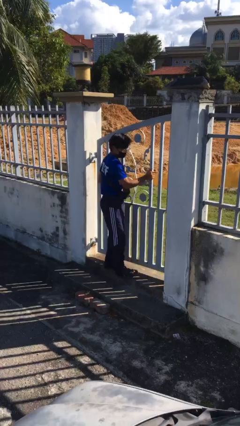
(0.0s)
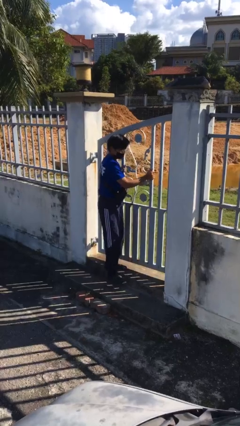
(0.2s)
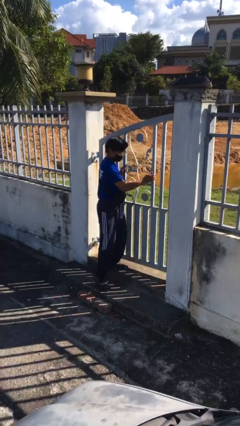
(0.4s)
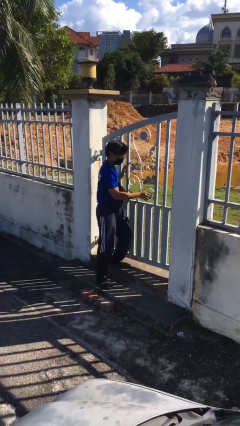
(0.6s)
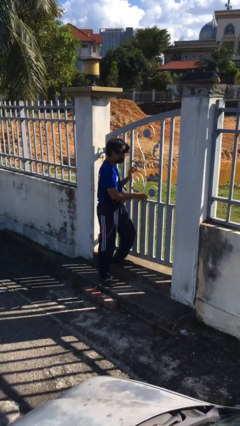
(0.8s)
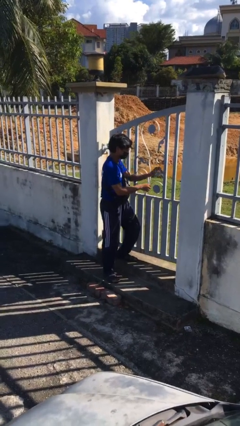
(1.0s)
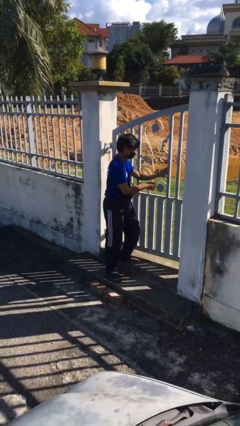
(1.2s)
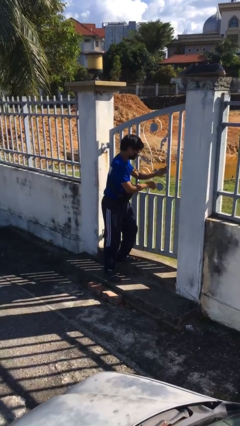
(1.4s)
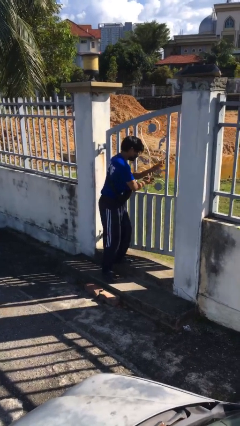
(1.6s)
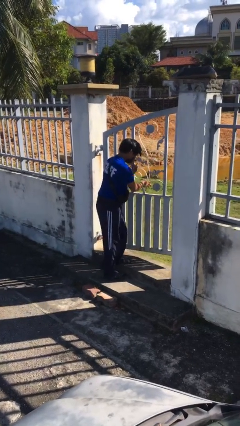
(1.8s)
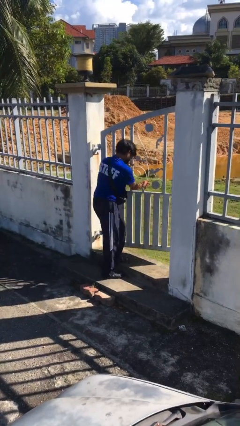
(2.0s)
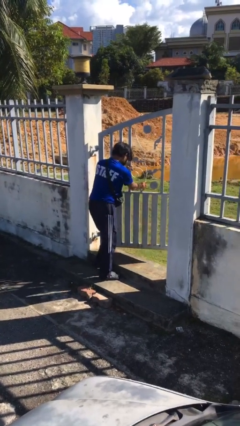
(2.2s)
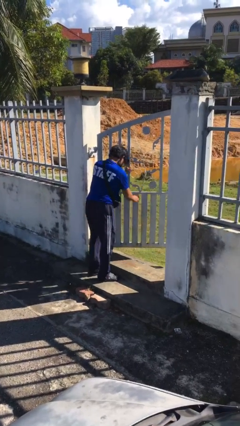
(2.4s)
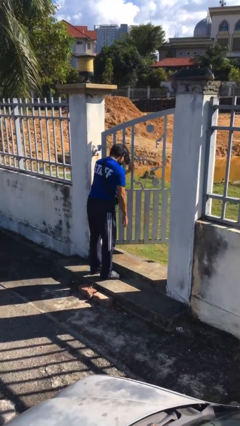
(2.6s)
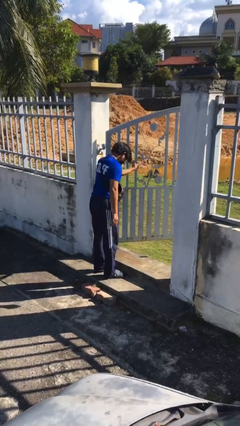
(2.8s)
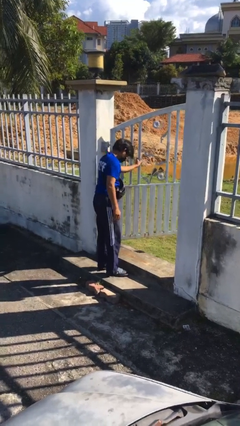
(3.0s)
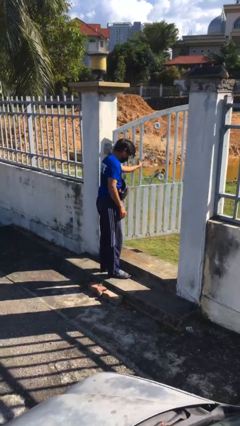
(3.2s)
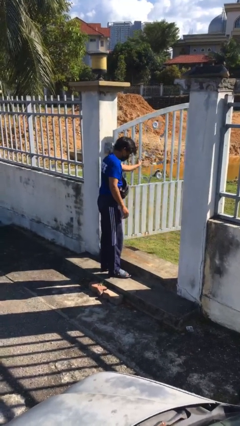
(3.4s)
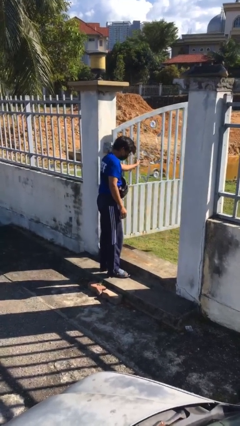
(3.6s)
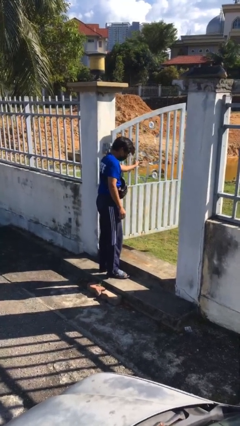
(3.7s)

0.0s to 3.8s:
person opens facility door

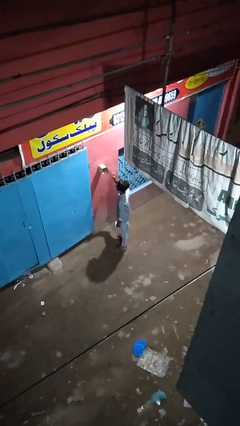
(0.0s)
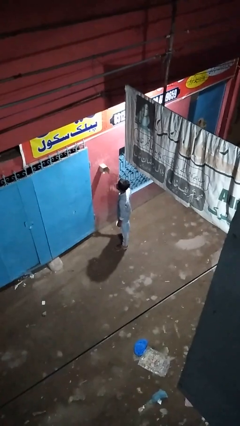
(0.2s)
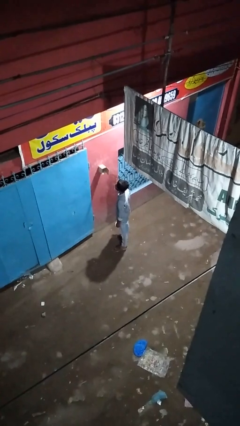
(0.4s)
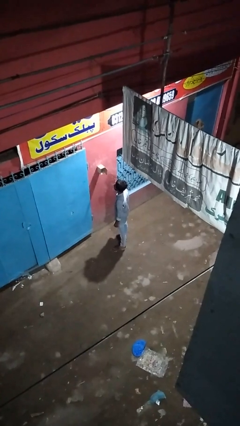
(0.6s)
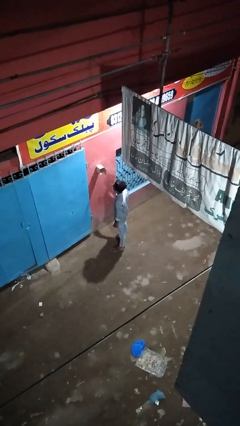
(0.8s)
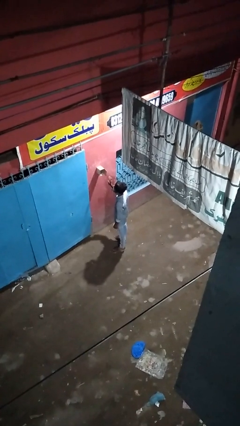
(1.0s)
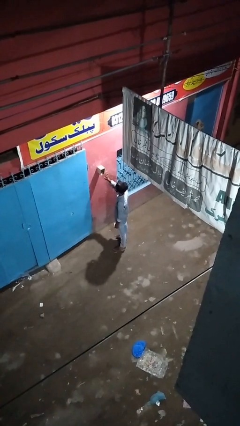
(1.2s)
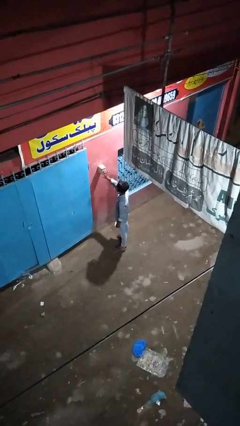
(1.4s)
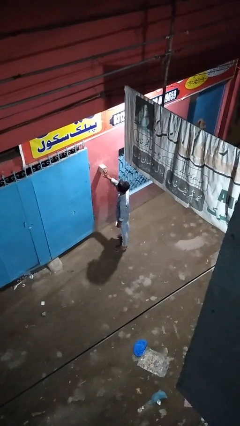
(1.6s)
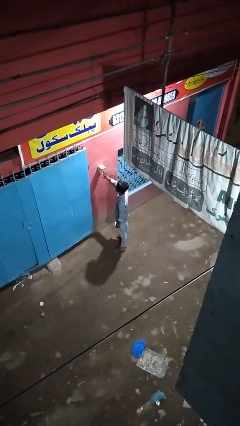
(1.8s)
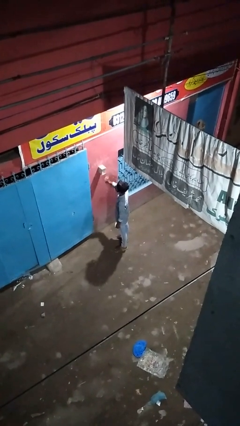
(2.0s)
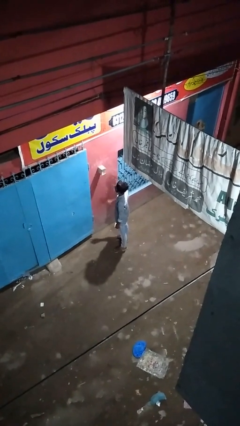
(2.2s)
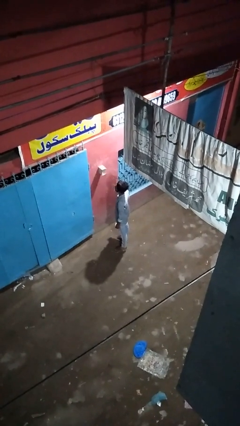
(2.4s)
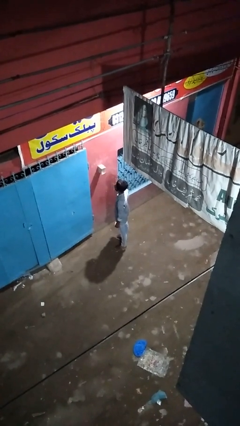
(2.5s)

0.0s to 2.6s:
person closes mailbox

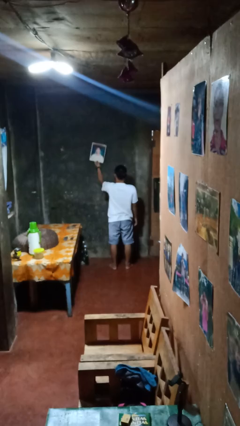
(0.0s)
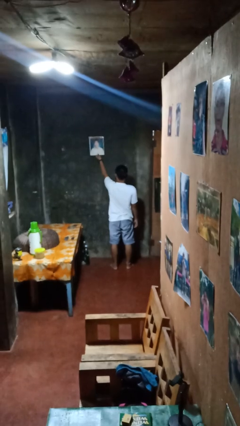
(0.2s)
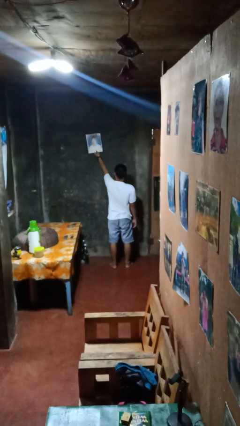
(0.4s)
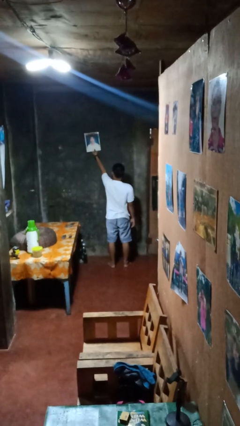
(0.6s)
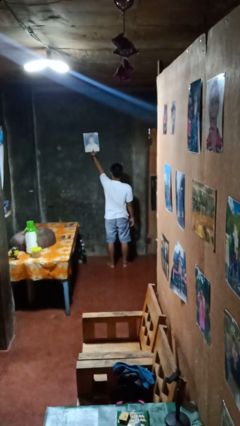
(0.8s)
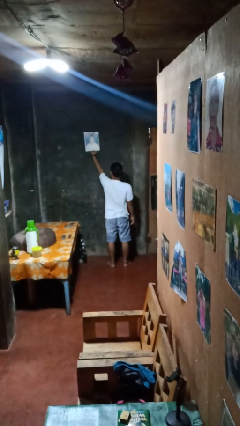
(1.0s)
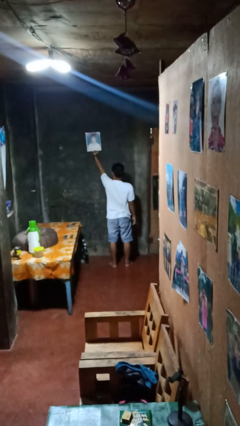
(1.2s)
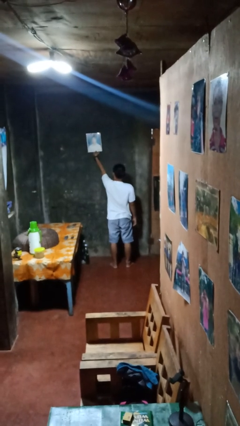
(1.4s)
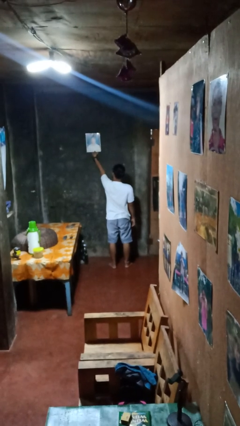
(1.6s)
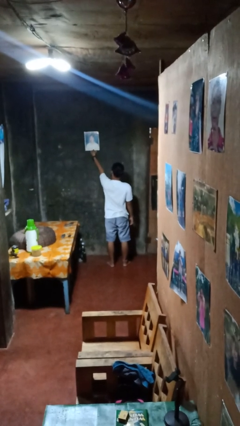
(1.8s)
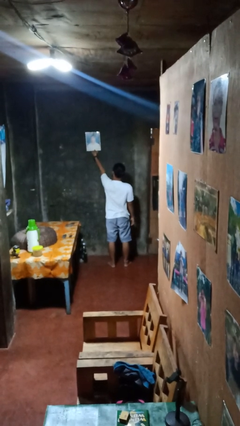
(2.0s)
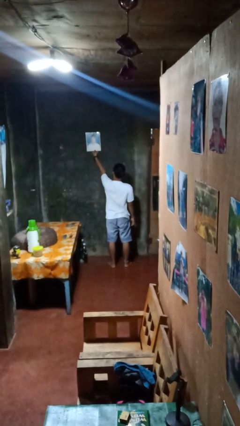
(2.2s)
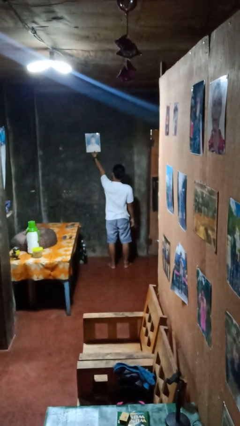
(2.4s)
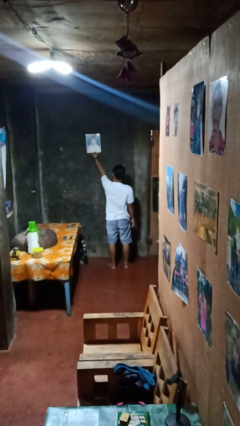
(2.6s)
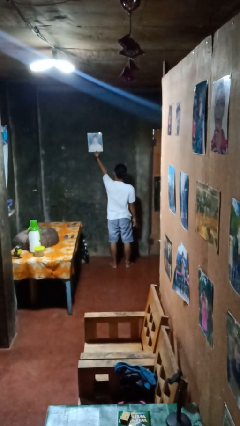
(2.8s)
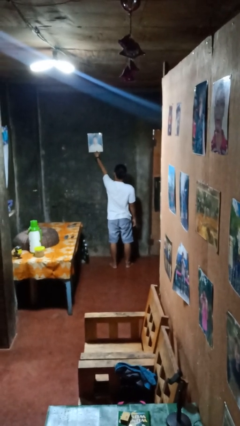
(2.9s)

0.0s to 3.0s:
person puts up picture frame

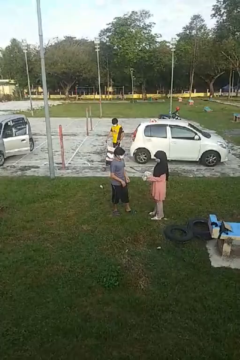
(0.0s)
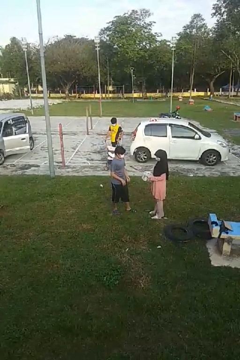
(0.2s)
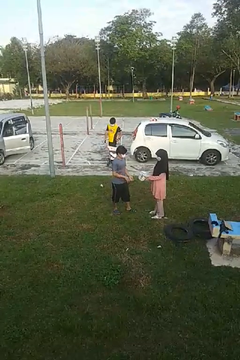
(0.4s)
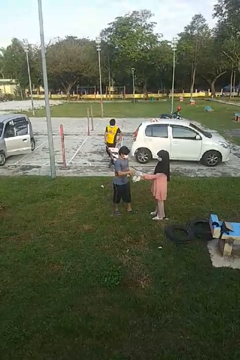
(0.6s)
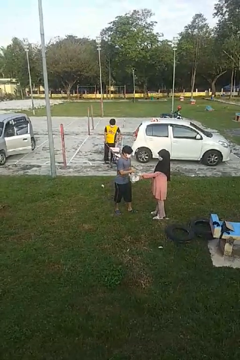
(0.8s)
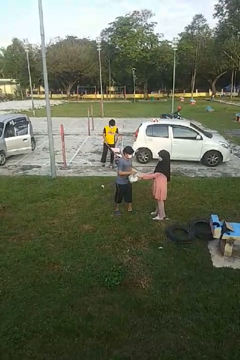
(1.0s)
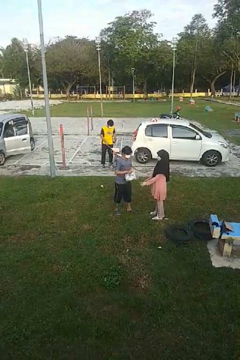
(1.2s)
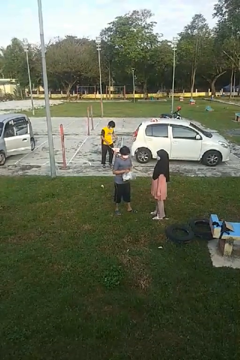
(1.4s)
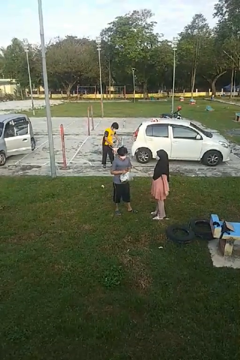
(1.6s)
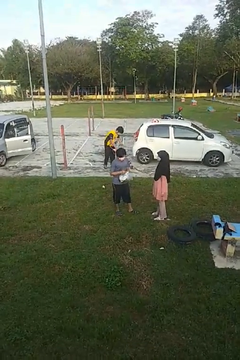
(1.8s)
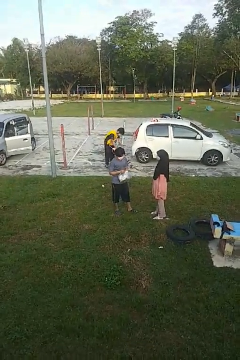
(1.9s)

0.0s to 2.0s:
person transfers object to person

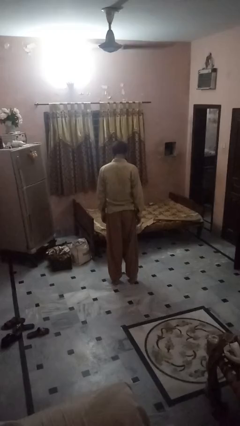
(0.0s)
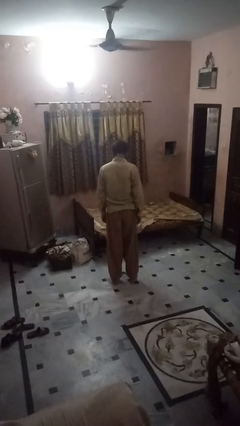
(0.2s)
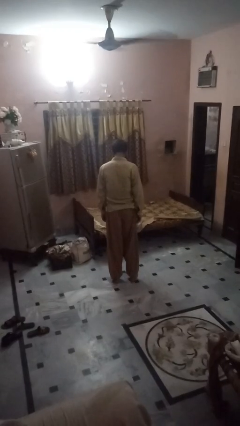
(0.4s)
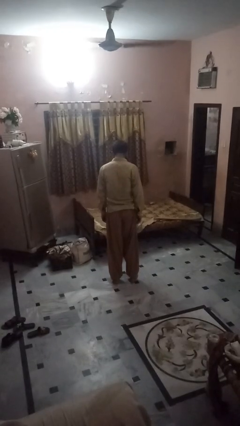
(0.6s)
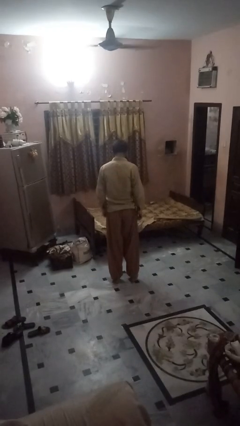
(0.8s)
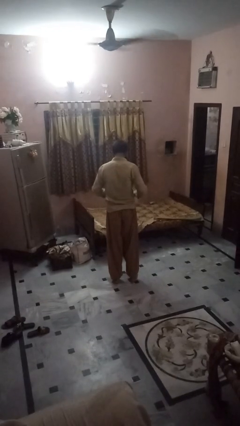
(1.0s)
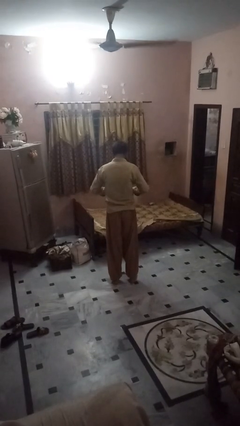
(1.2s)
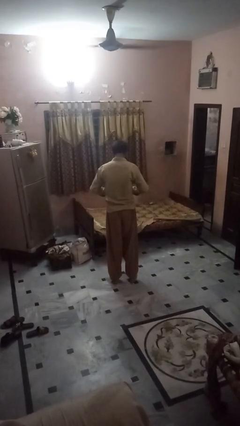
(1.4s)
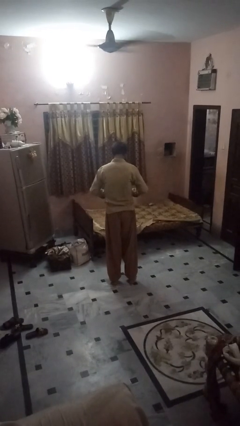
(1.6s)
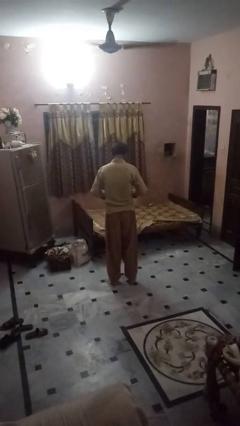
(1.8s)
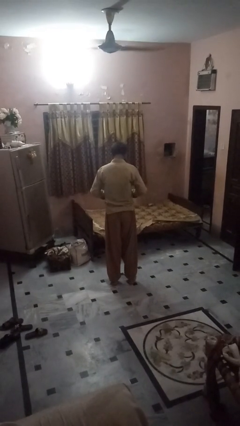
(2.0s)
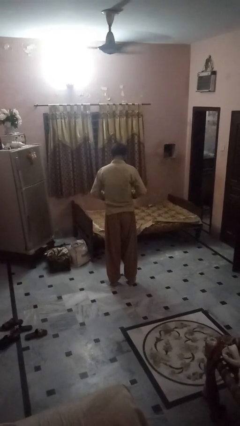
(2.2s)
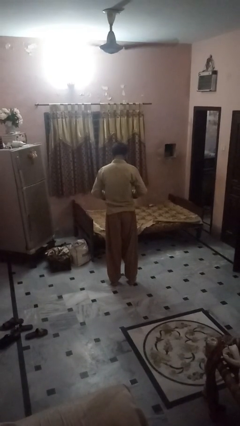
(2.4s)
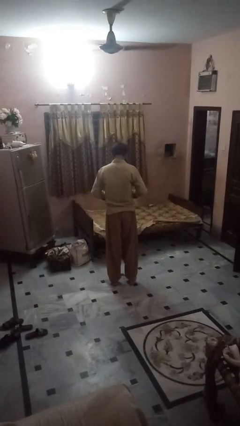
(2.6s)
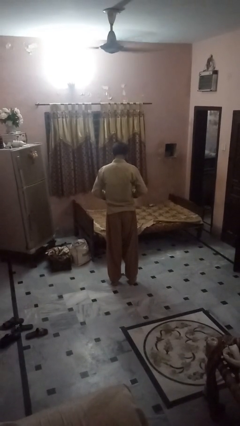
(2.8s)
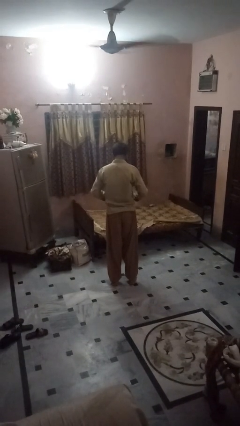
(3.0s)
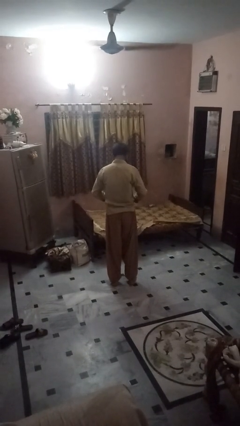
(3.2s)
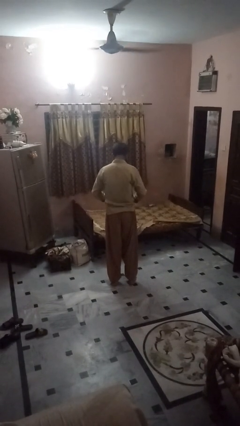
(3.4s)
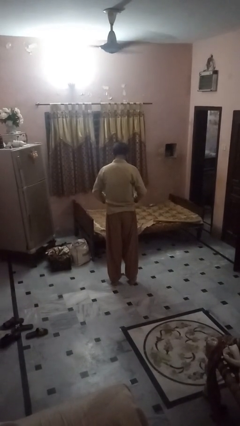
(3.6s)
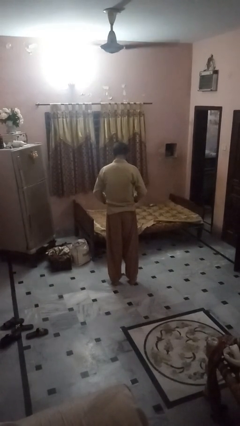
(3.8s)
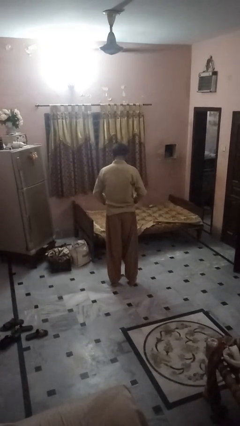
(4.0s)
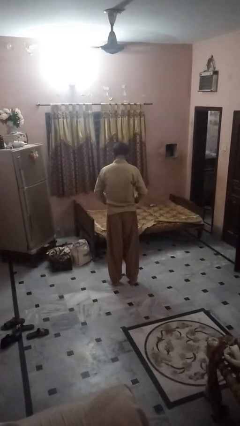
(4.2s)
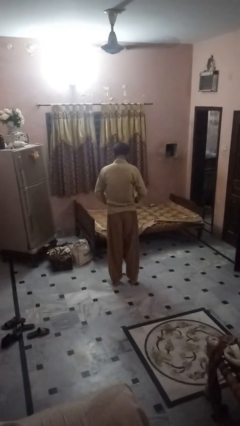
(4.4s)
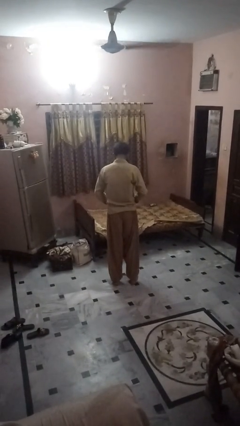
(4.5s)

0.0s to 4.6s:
person buttons shirt

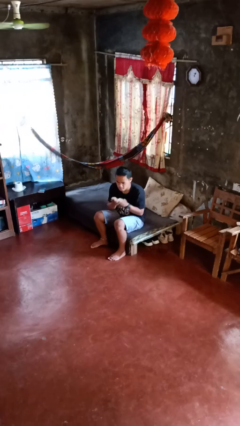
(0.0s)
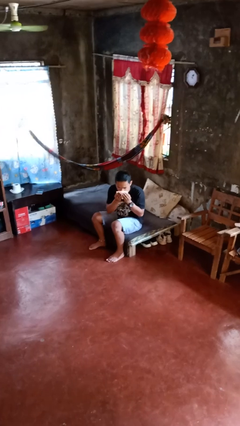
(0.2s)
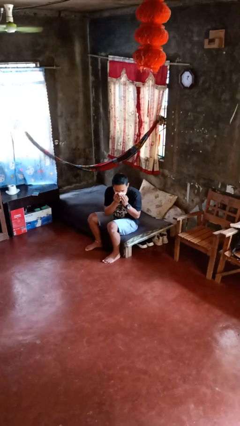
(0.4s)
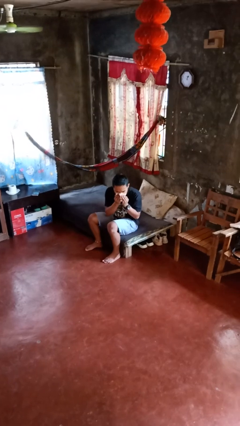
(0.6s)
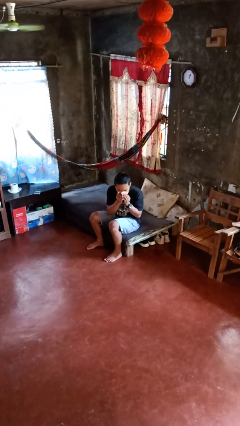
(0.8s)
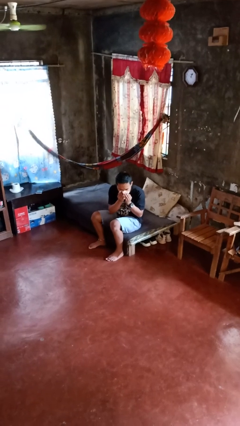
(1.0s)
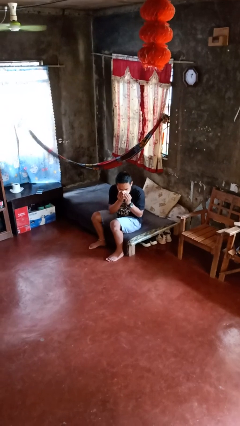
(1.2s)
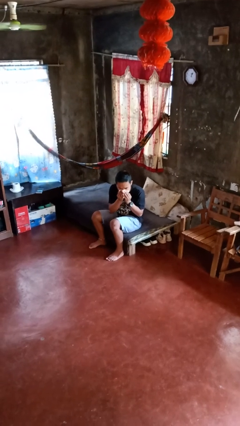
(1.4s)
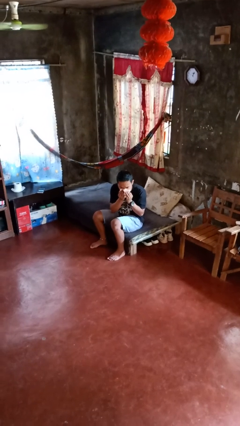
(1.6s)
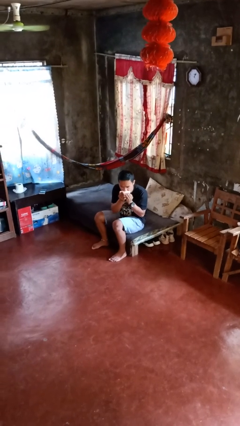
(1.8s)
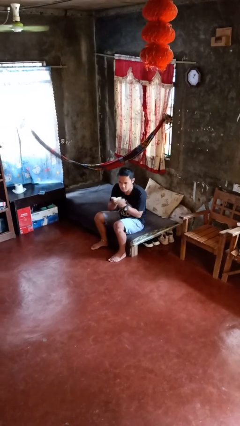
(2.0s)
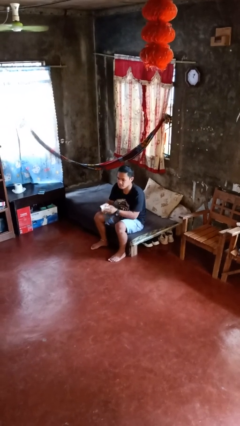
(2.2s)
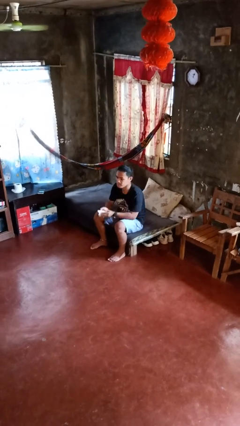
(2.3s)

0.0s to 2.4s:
person blows nose
